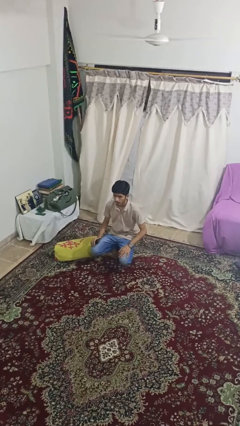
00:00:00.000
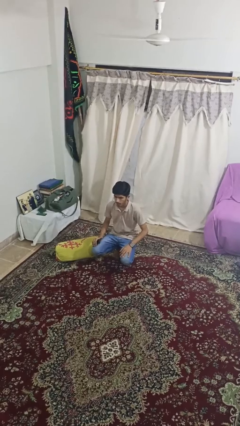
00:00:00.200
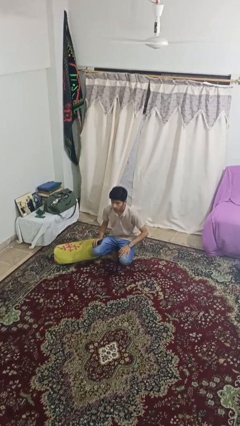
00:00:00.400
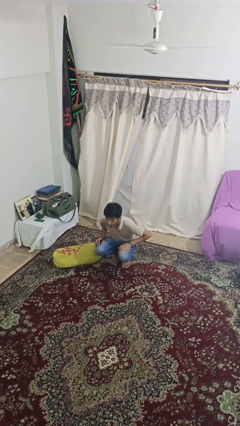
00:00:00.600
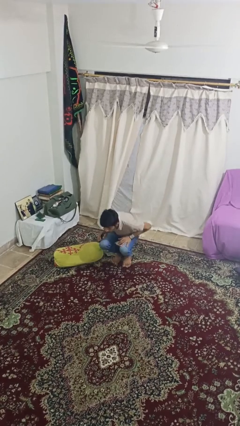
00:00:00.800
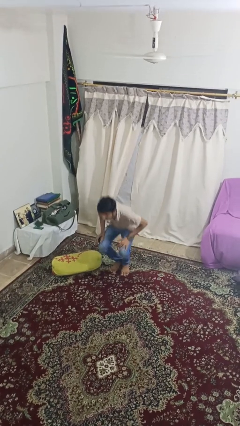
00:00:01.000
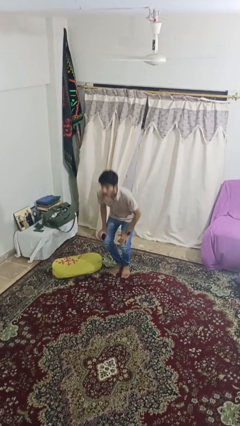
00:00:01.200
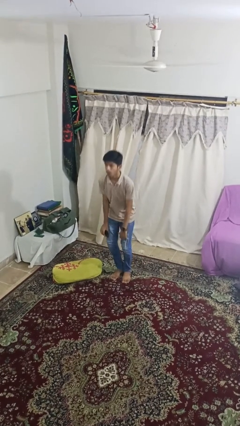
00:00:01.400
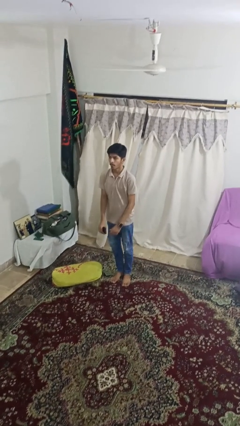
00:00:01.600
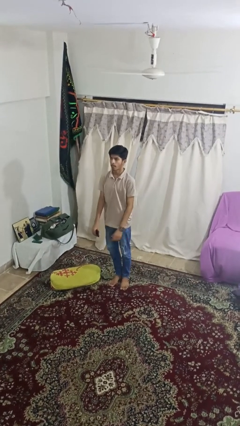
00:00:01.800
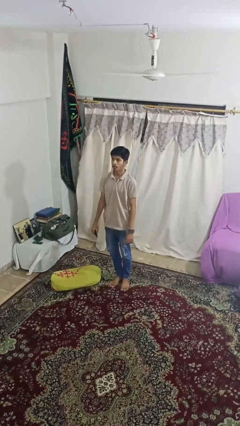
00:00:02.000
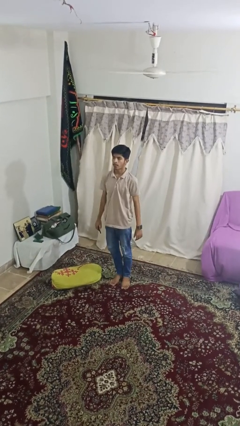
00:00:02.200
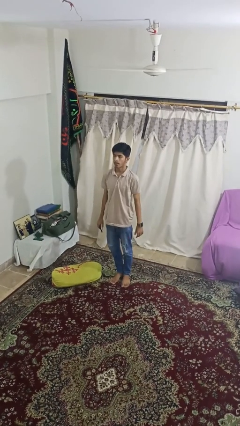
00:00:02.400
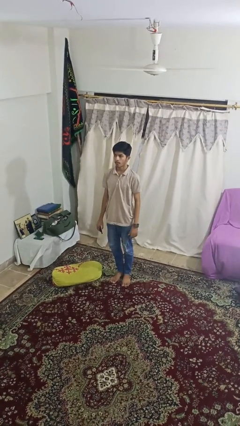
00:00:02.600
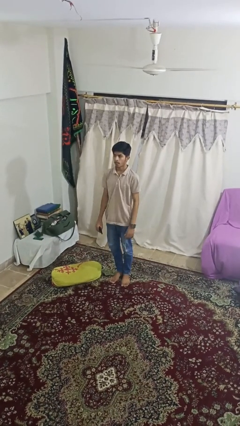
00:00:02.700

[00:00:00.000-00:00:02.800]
person stands up

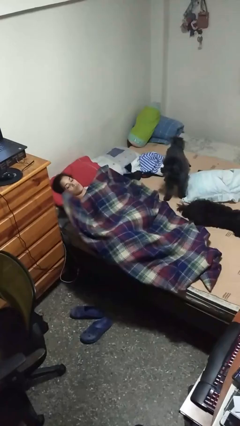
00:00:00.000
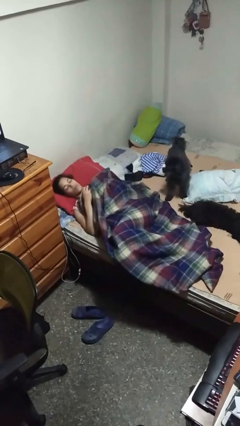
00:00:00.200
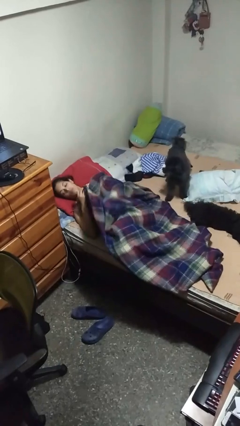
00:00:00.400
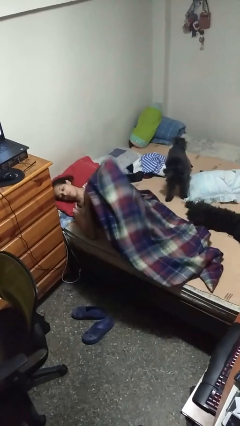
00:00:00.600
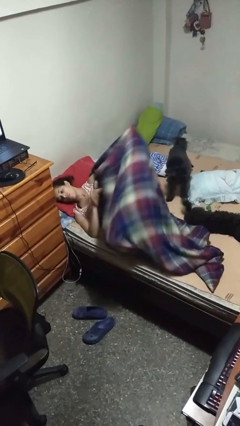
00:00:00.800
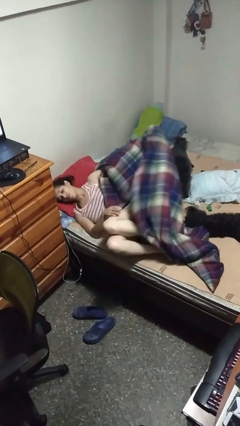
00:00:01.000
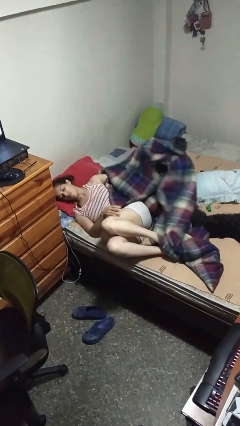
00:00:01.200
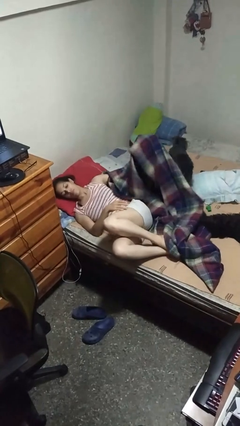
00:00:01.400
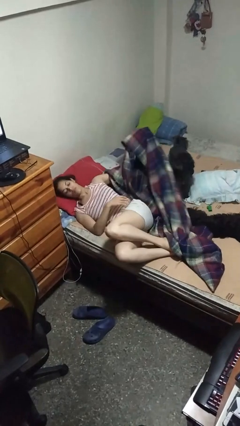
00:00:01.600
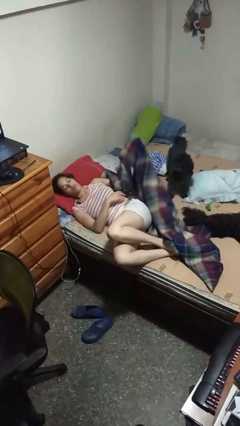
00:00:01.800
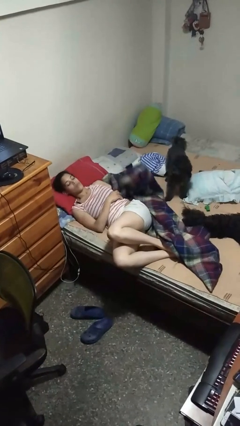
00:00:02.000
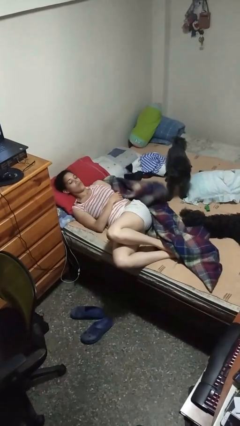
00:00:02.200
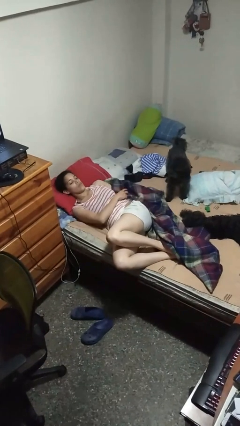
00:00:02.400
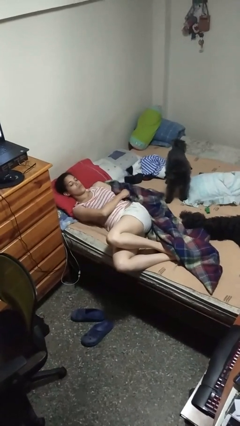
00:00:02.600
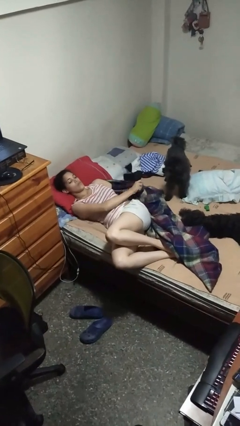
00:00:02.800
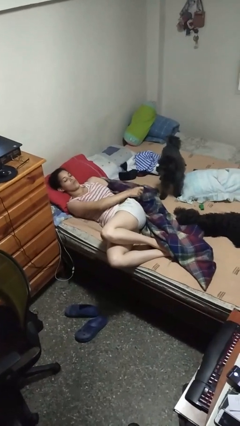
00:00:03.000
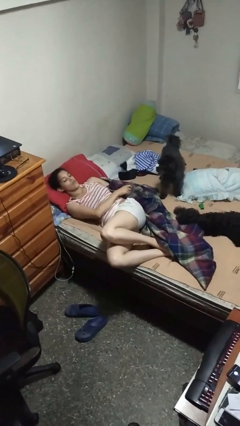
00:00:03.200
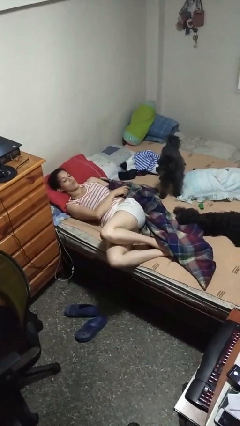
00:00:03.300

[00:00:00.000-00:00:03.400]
person uncovers with bedsheets

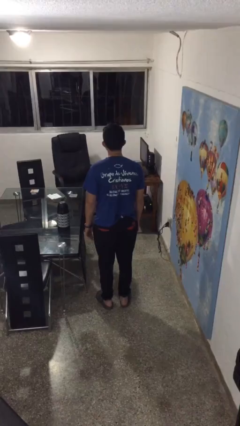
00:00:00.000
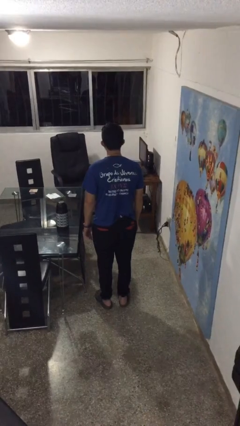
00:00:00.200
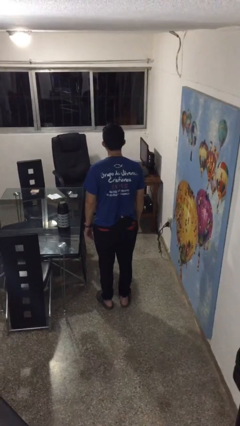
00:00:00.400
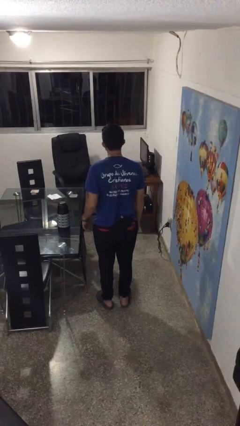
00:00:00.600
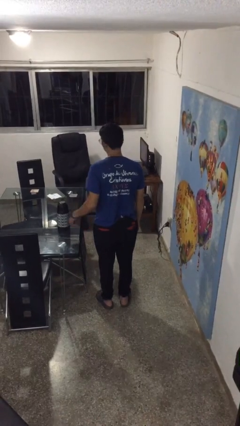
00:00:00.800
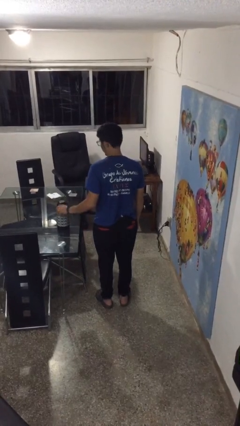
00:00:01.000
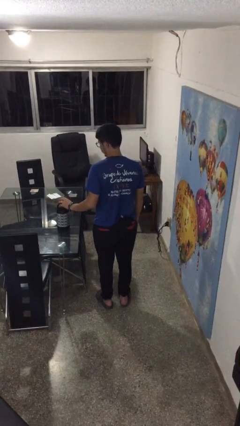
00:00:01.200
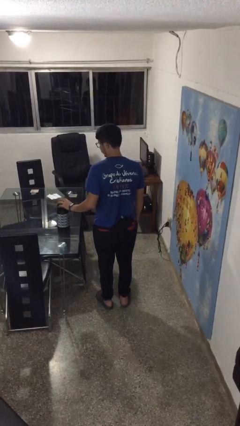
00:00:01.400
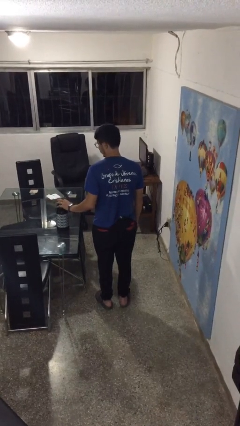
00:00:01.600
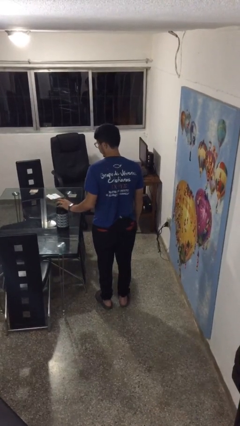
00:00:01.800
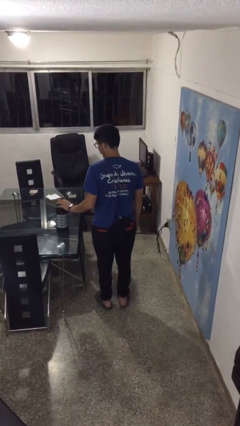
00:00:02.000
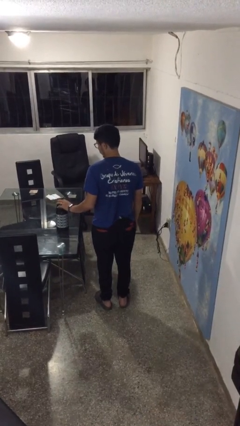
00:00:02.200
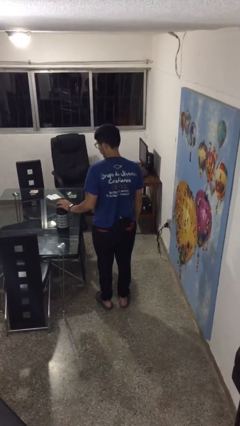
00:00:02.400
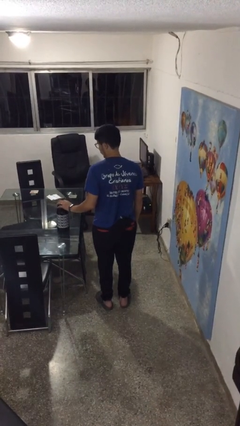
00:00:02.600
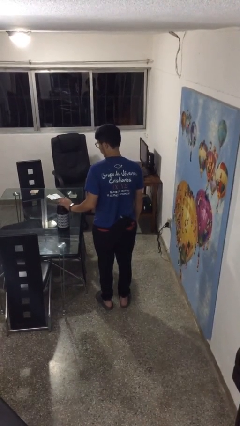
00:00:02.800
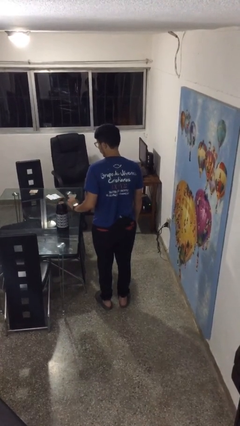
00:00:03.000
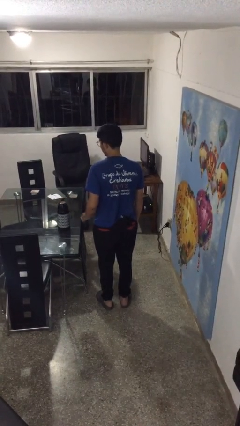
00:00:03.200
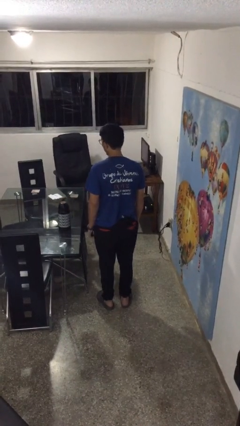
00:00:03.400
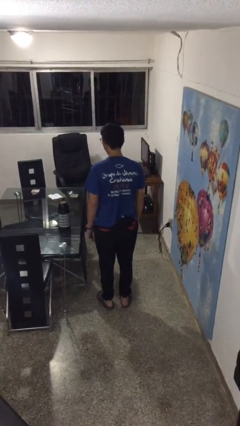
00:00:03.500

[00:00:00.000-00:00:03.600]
person taps object with finger

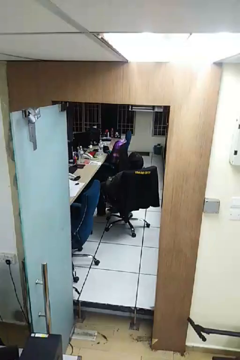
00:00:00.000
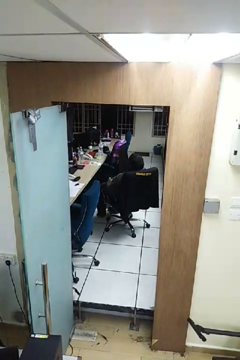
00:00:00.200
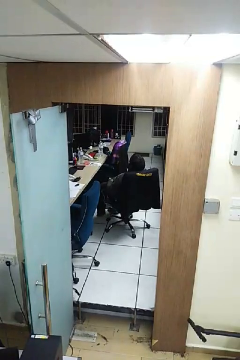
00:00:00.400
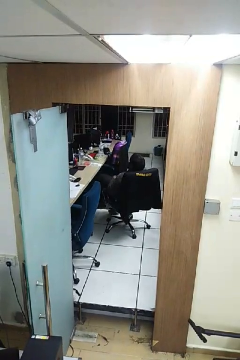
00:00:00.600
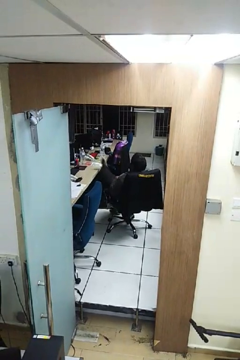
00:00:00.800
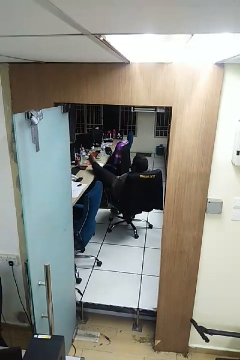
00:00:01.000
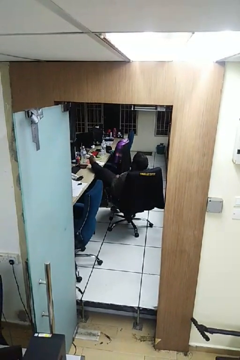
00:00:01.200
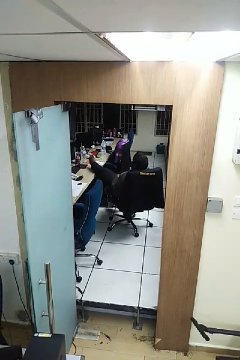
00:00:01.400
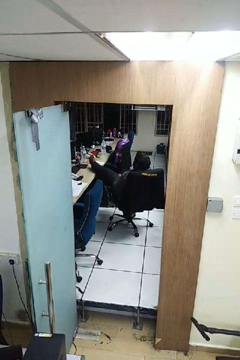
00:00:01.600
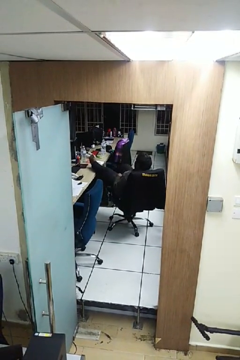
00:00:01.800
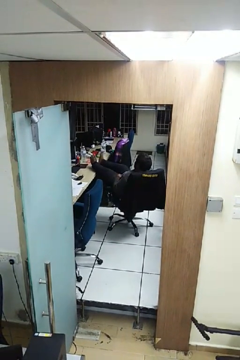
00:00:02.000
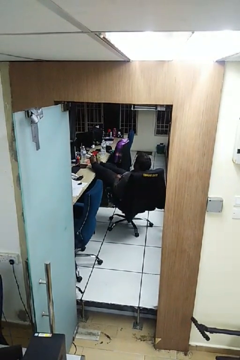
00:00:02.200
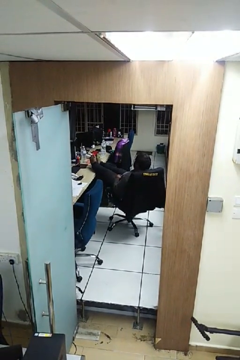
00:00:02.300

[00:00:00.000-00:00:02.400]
person puts feet up

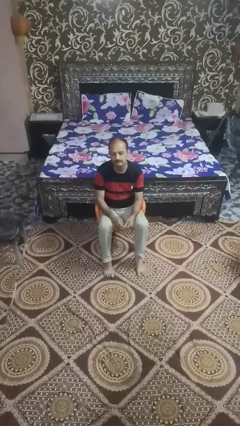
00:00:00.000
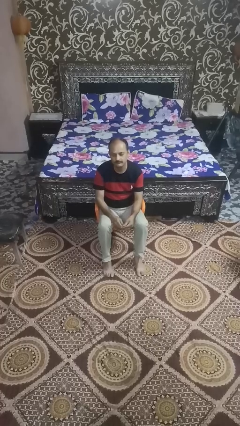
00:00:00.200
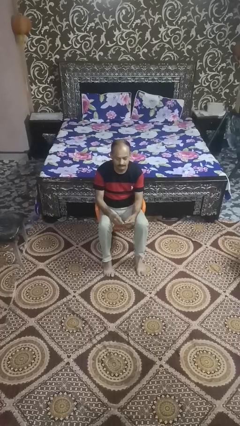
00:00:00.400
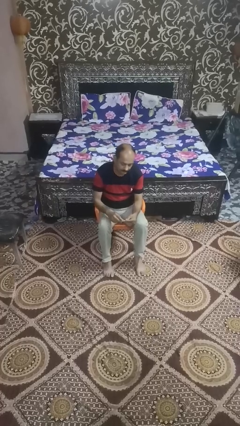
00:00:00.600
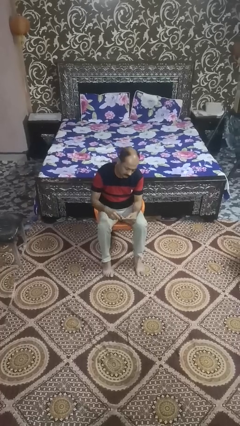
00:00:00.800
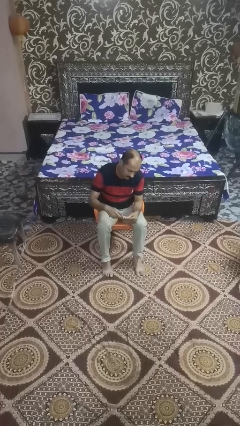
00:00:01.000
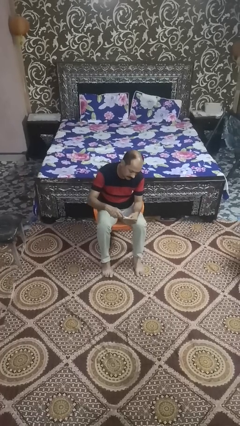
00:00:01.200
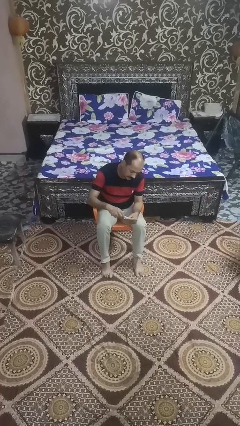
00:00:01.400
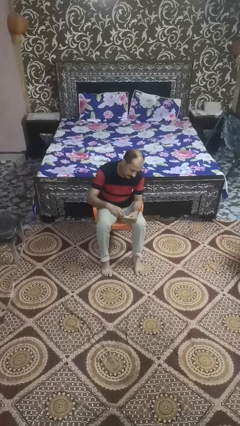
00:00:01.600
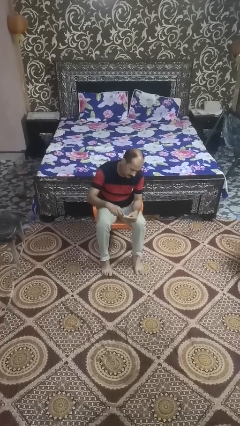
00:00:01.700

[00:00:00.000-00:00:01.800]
person files fingernails

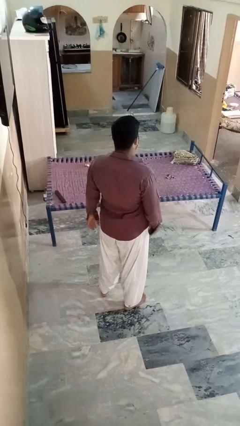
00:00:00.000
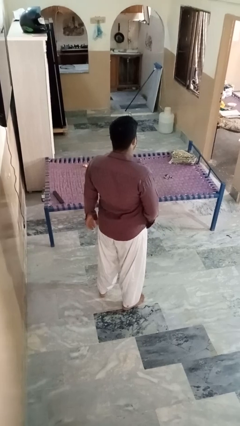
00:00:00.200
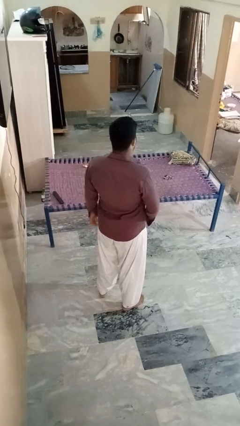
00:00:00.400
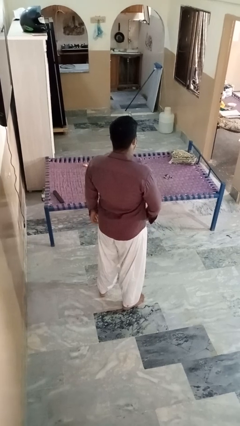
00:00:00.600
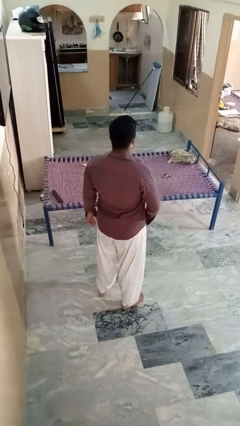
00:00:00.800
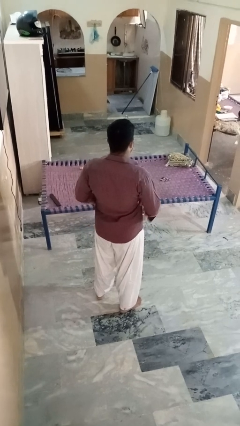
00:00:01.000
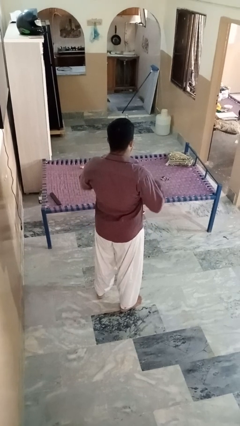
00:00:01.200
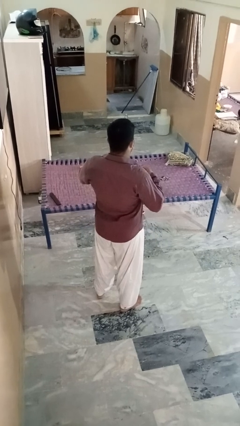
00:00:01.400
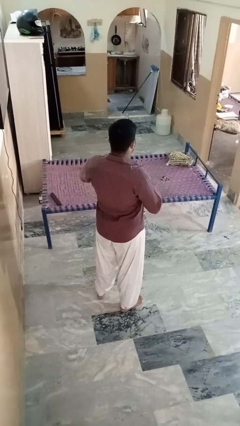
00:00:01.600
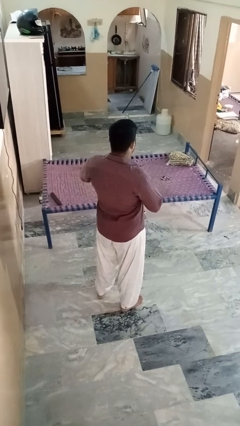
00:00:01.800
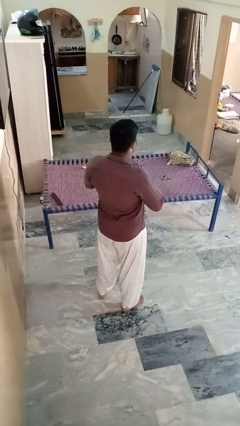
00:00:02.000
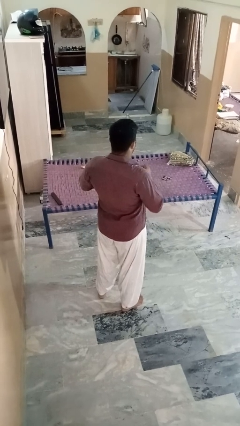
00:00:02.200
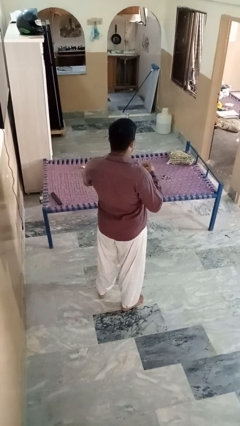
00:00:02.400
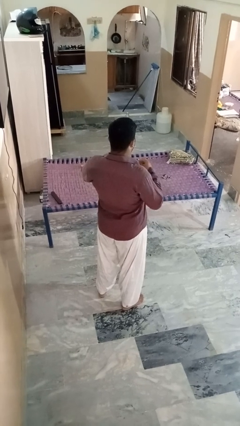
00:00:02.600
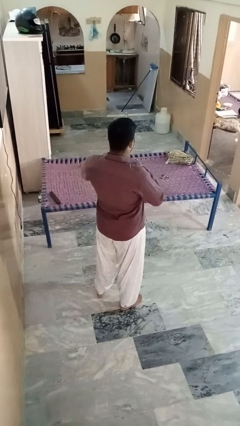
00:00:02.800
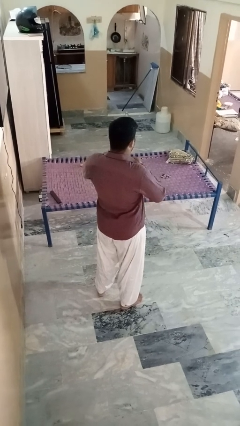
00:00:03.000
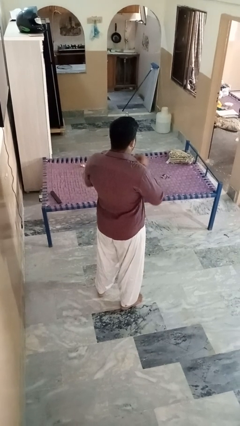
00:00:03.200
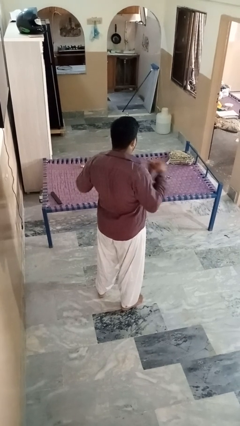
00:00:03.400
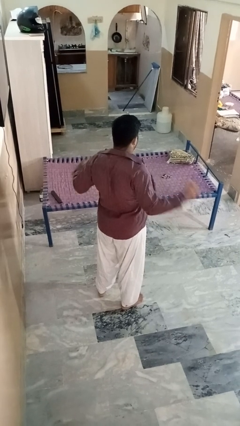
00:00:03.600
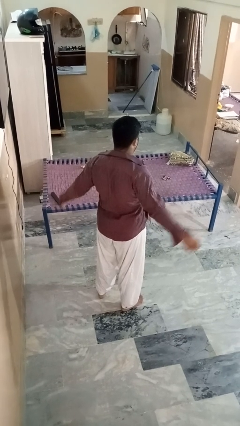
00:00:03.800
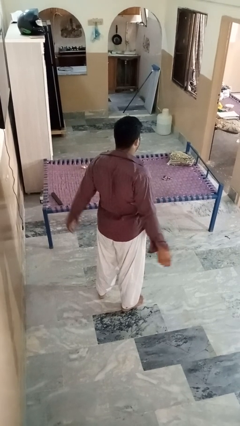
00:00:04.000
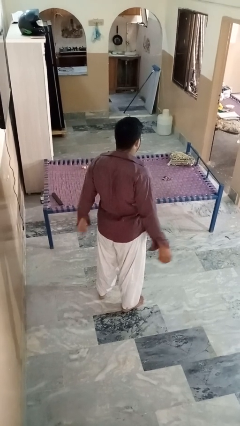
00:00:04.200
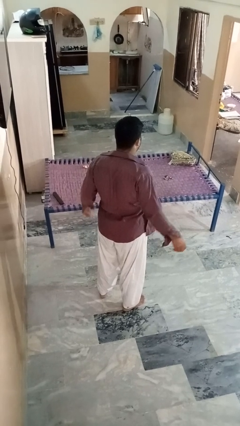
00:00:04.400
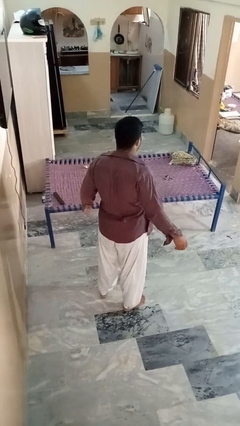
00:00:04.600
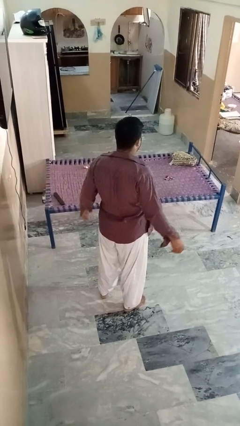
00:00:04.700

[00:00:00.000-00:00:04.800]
person unbuttons shirt
